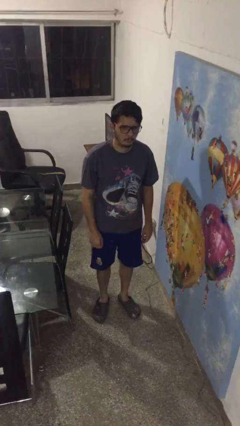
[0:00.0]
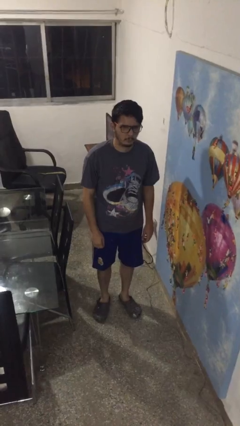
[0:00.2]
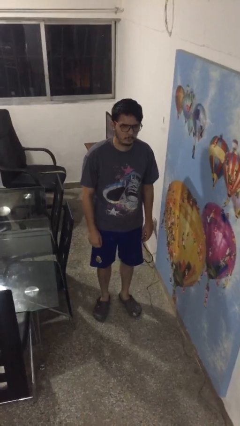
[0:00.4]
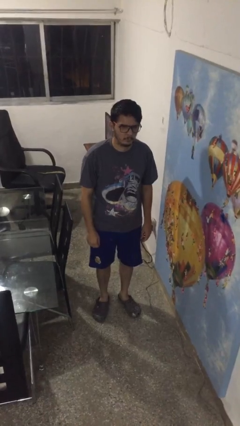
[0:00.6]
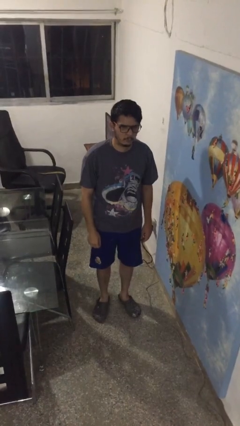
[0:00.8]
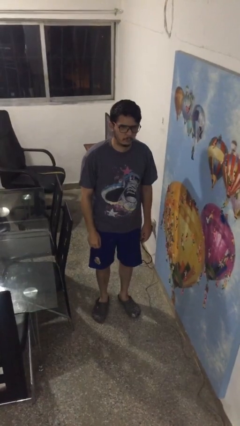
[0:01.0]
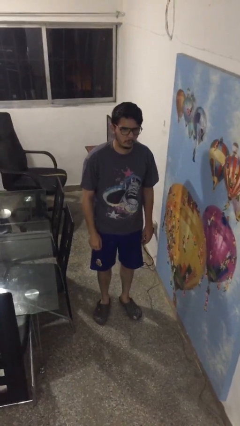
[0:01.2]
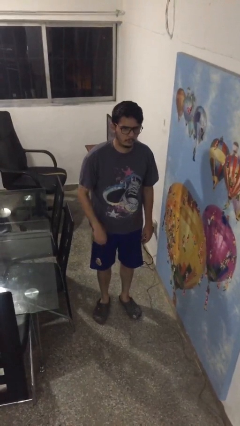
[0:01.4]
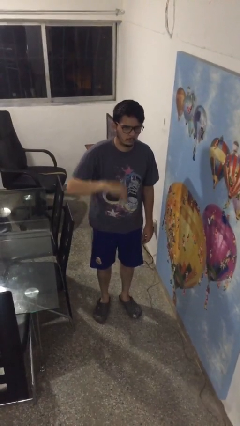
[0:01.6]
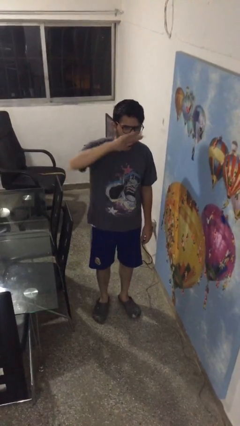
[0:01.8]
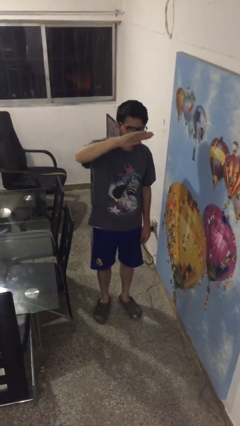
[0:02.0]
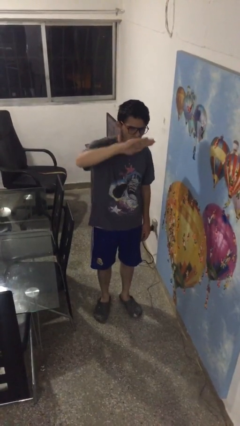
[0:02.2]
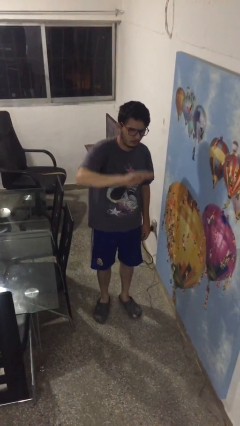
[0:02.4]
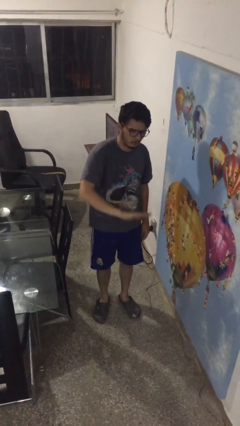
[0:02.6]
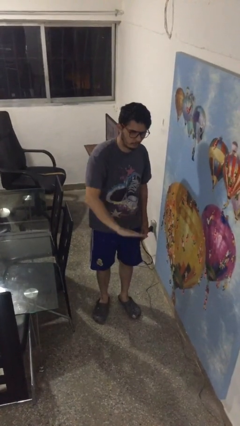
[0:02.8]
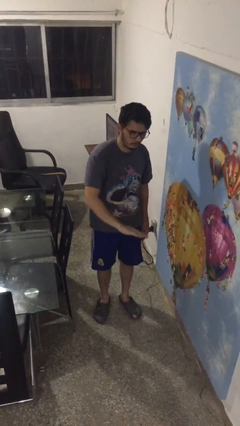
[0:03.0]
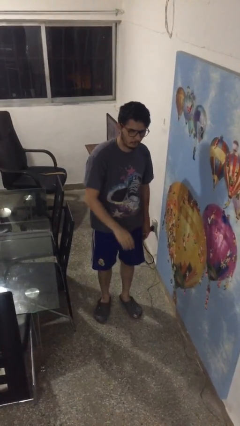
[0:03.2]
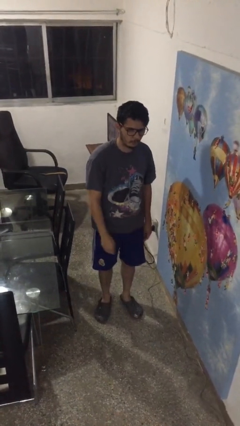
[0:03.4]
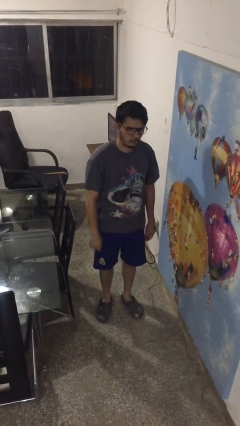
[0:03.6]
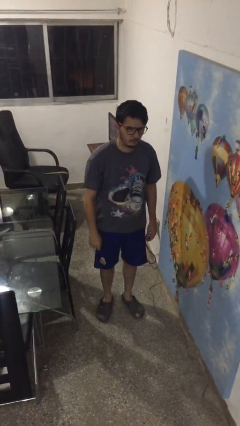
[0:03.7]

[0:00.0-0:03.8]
person gestures swipe down

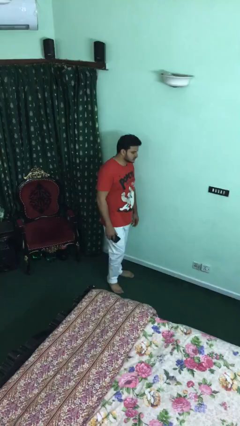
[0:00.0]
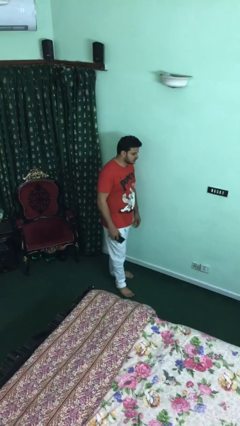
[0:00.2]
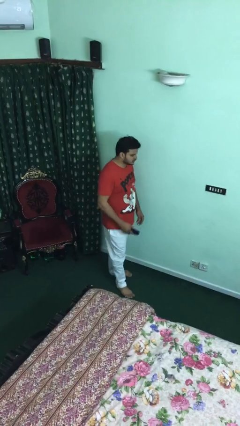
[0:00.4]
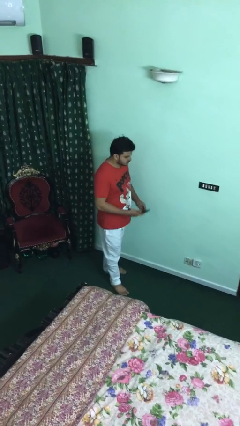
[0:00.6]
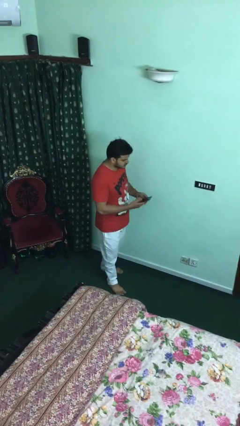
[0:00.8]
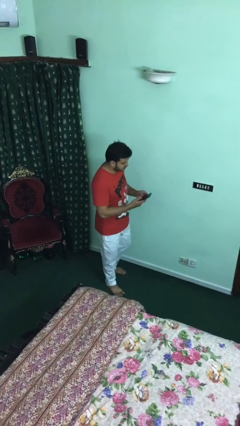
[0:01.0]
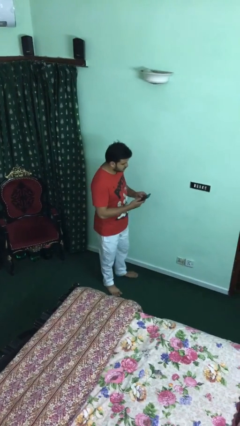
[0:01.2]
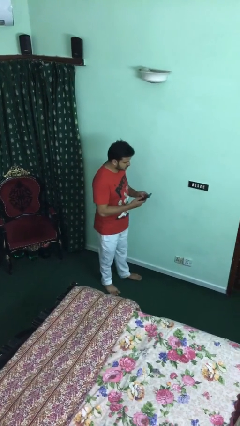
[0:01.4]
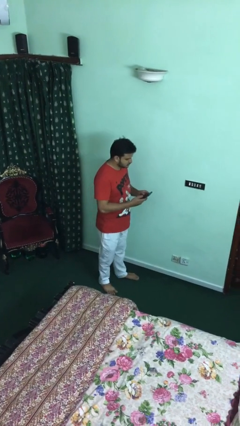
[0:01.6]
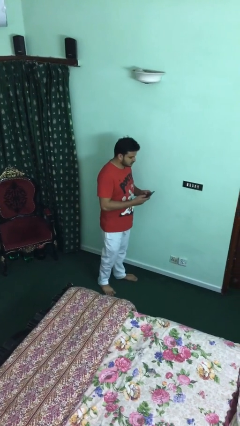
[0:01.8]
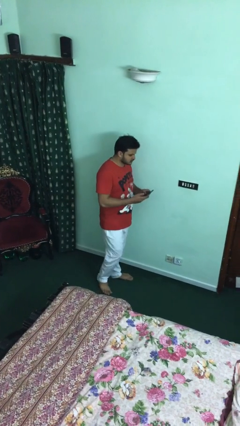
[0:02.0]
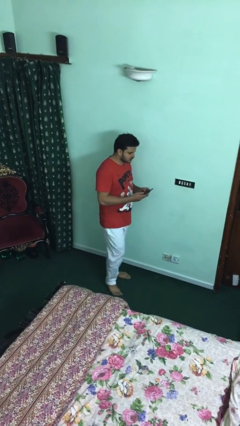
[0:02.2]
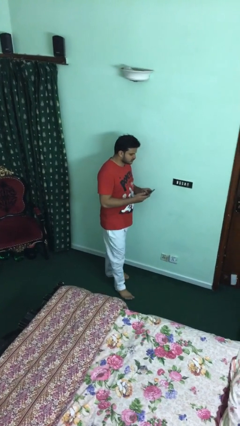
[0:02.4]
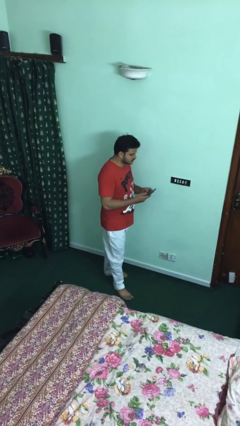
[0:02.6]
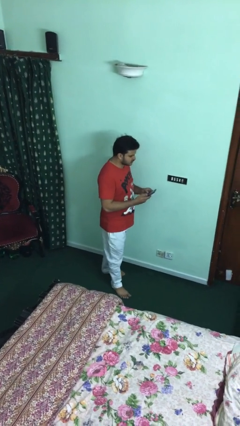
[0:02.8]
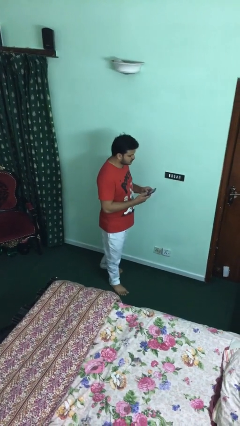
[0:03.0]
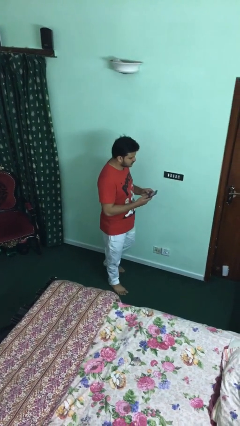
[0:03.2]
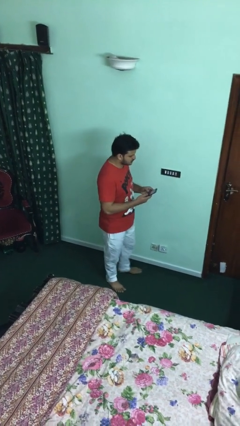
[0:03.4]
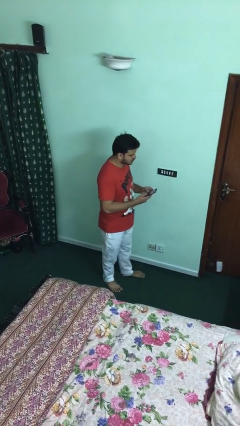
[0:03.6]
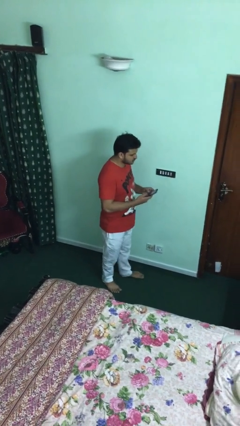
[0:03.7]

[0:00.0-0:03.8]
person texts on phone

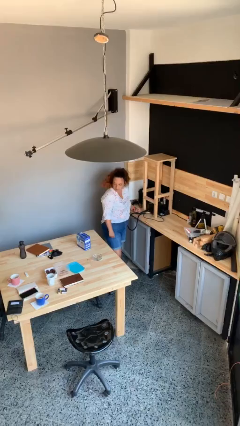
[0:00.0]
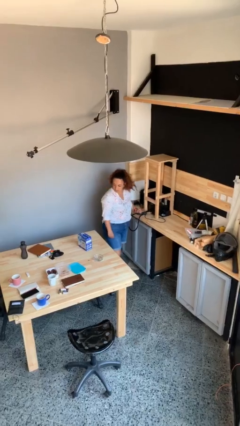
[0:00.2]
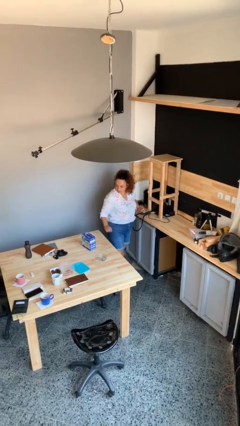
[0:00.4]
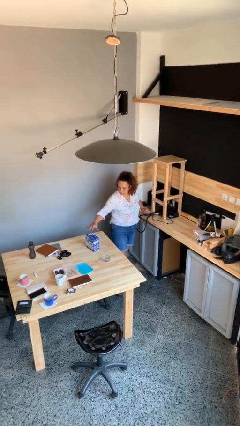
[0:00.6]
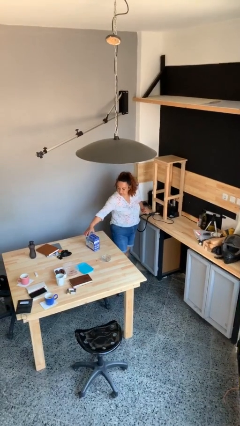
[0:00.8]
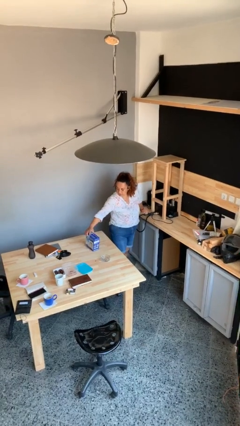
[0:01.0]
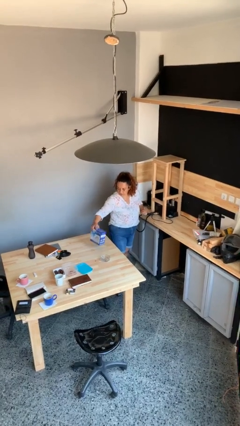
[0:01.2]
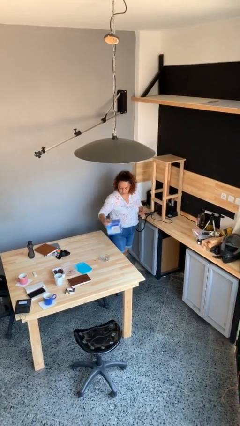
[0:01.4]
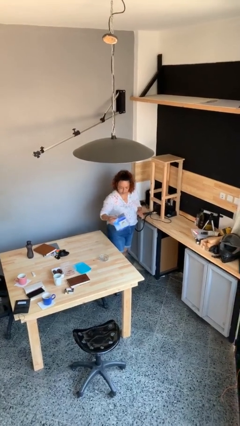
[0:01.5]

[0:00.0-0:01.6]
person picks up object from table

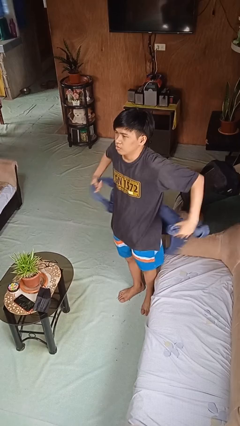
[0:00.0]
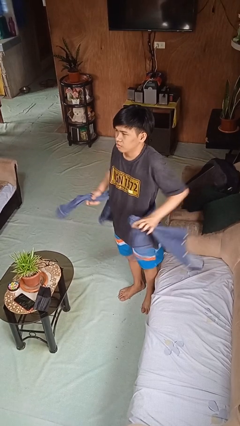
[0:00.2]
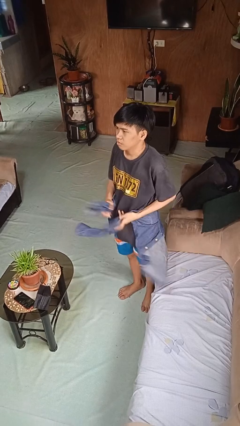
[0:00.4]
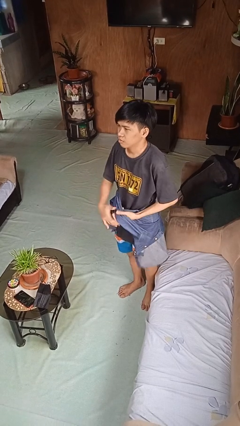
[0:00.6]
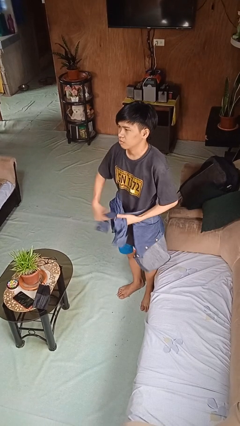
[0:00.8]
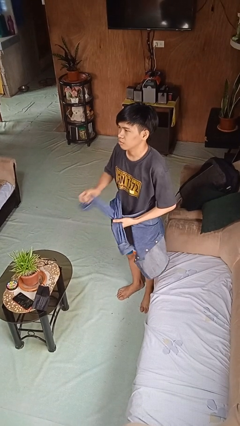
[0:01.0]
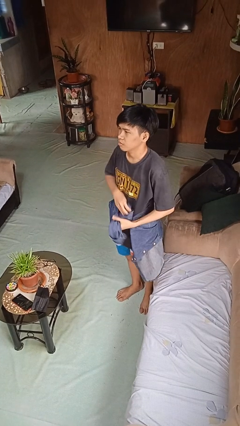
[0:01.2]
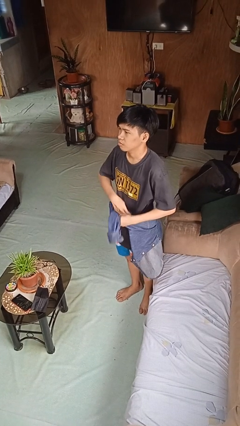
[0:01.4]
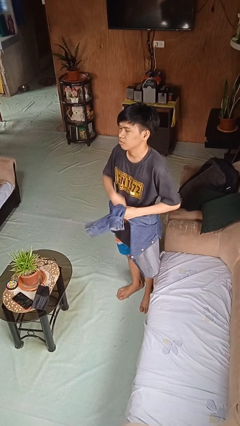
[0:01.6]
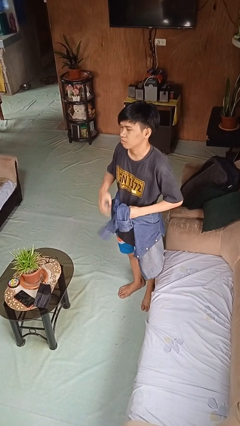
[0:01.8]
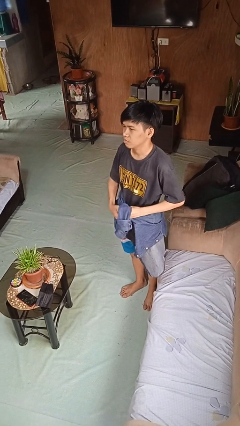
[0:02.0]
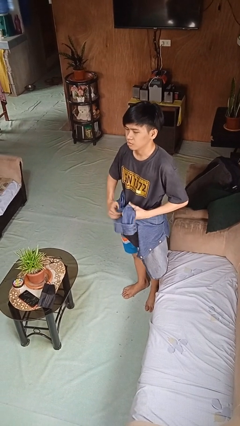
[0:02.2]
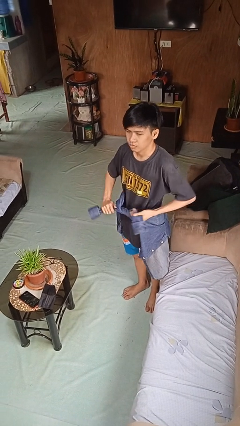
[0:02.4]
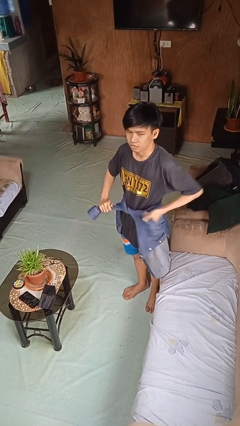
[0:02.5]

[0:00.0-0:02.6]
person ties jacket around waist

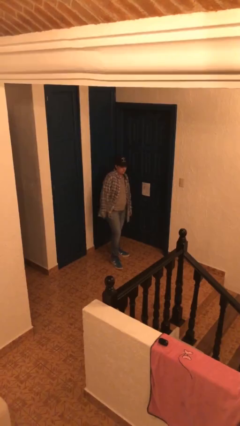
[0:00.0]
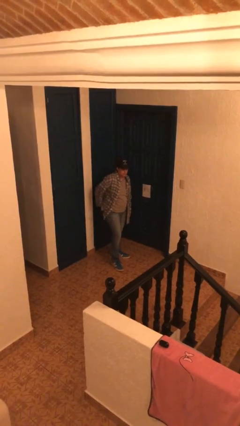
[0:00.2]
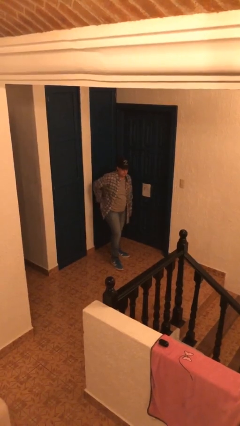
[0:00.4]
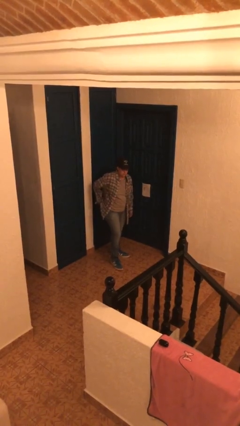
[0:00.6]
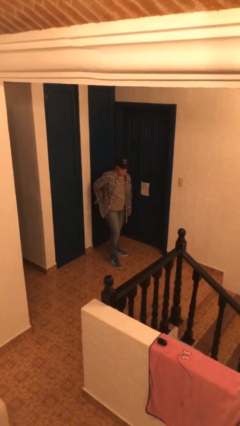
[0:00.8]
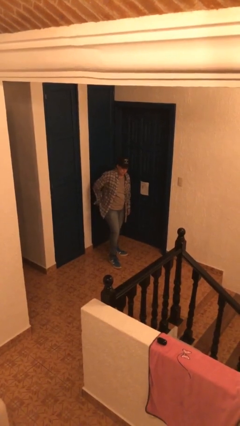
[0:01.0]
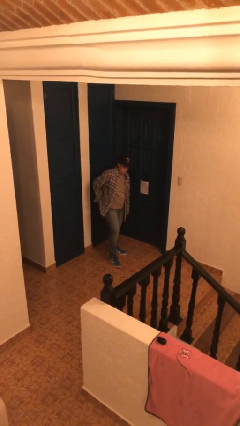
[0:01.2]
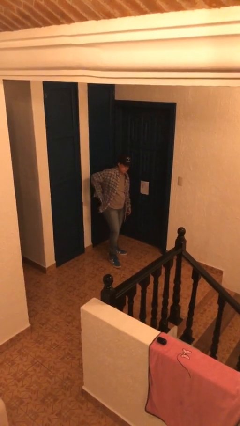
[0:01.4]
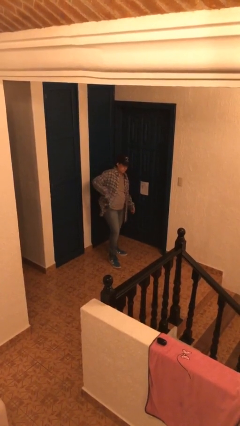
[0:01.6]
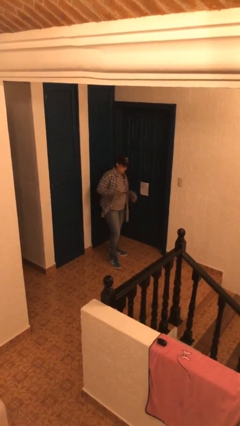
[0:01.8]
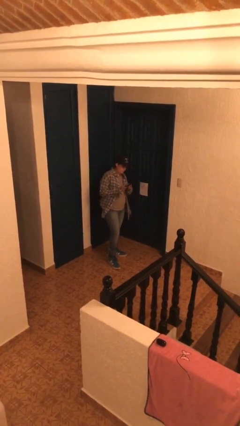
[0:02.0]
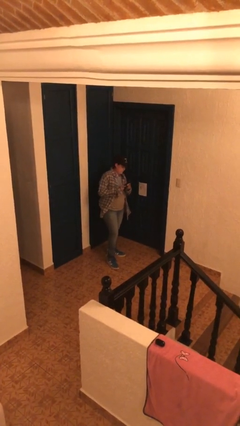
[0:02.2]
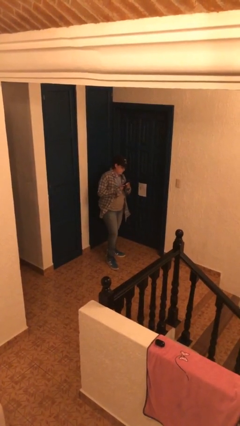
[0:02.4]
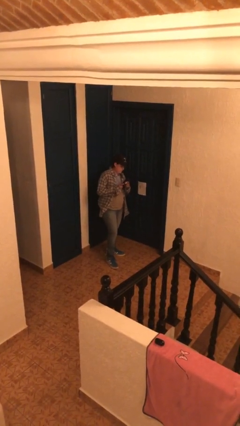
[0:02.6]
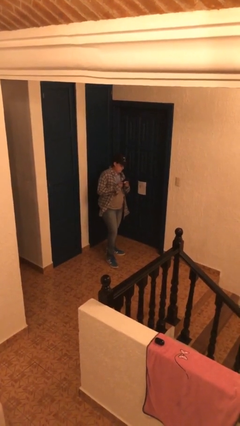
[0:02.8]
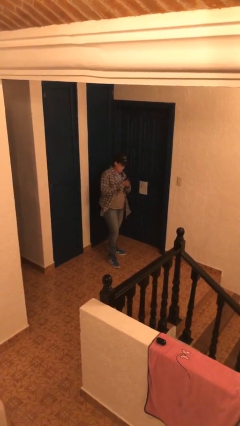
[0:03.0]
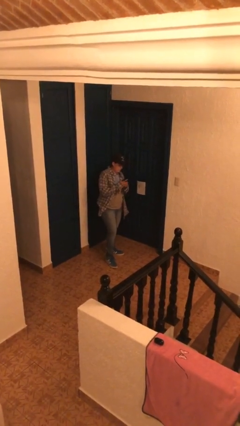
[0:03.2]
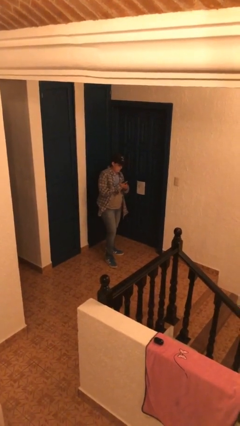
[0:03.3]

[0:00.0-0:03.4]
person takes phone from pocket

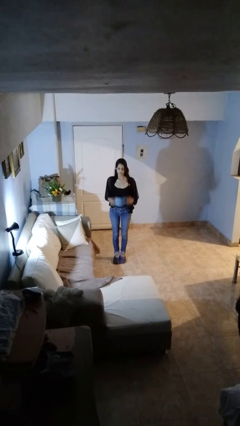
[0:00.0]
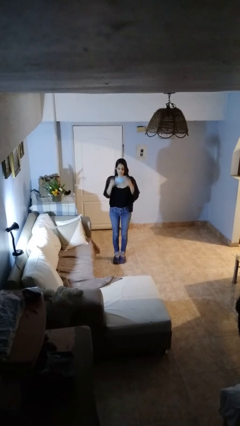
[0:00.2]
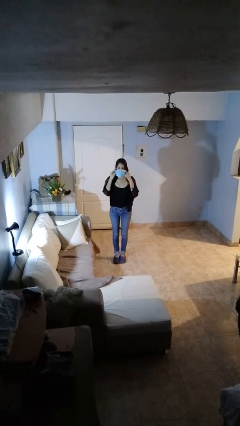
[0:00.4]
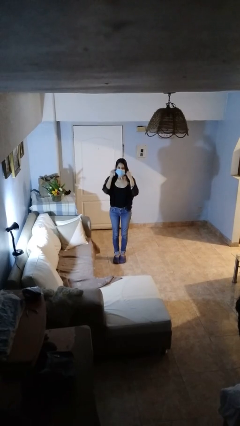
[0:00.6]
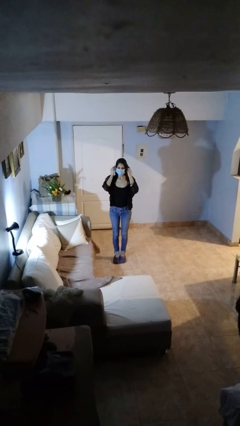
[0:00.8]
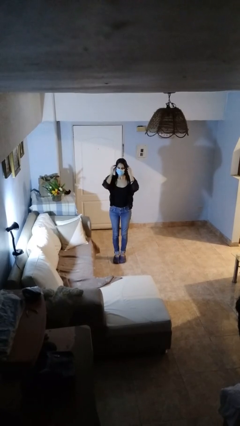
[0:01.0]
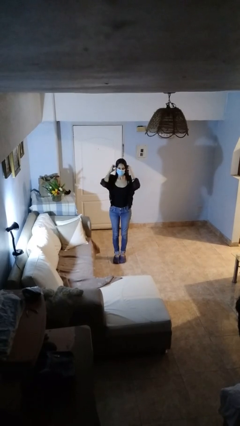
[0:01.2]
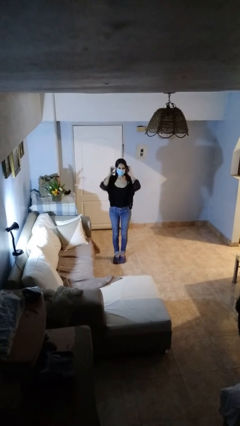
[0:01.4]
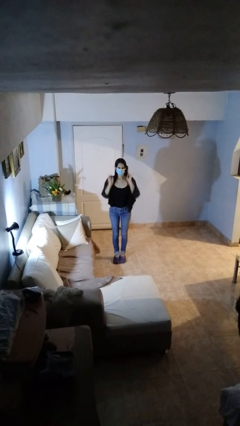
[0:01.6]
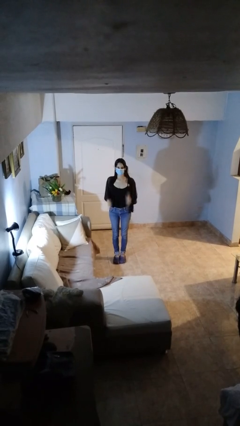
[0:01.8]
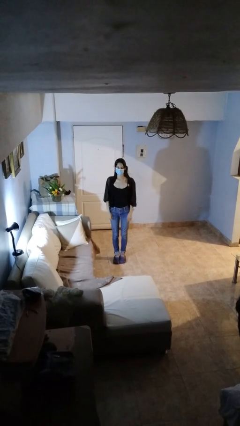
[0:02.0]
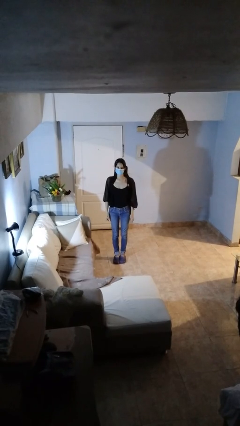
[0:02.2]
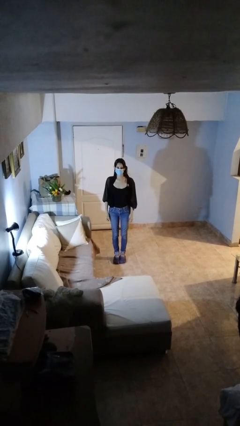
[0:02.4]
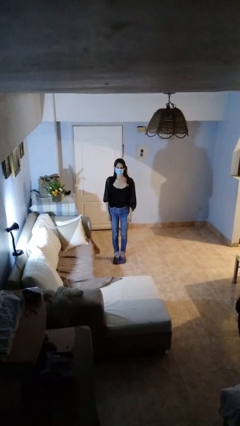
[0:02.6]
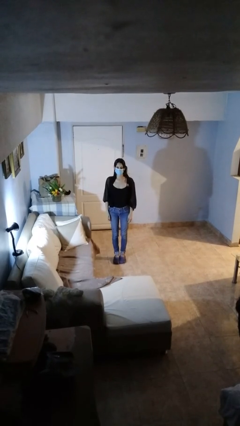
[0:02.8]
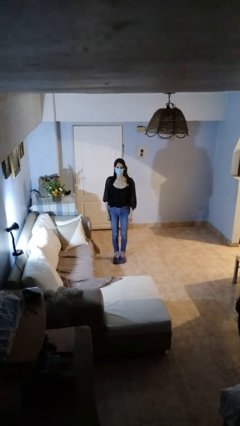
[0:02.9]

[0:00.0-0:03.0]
person puts on facemask
